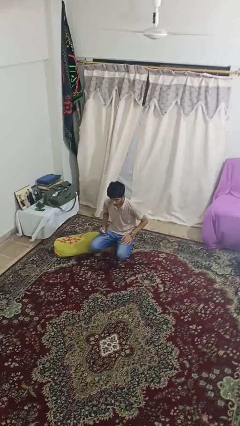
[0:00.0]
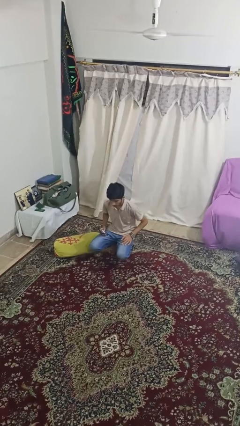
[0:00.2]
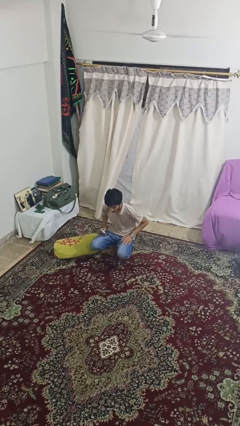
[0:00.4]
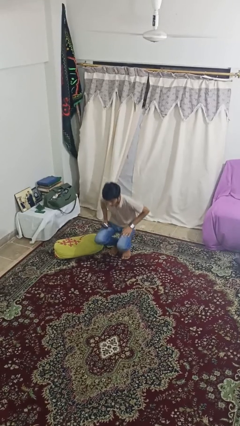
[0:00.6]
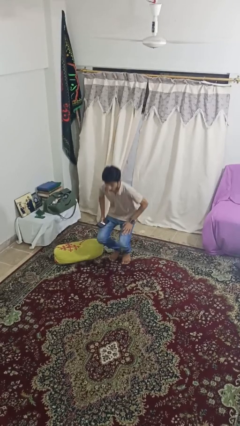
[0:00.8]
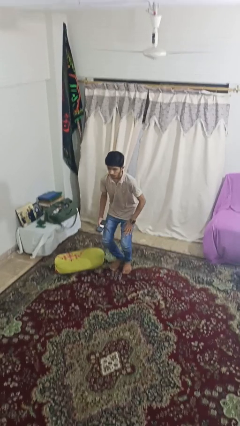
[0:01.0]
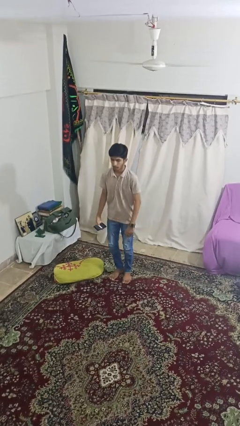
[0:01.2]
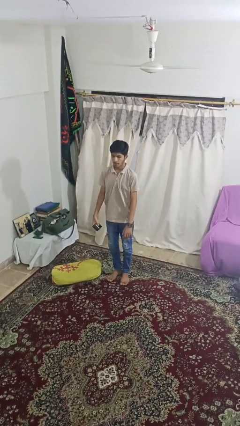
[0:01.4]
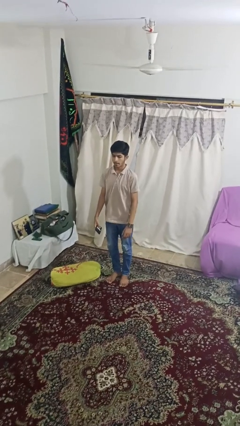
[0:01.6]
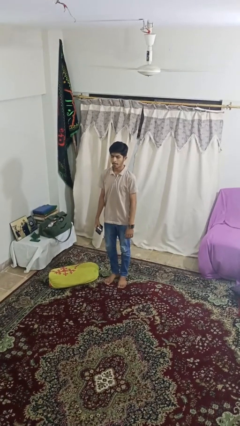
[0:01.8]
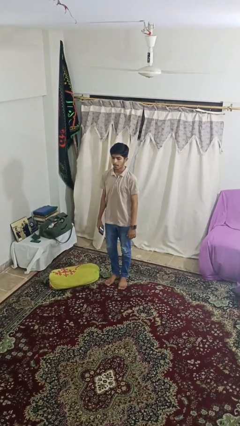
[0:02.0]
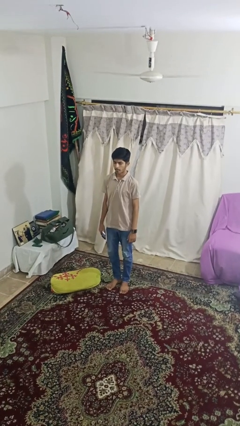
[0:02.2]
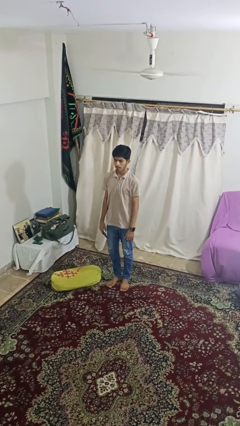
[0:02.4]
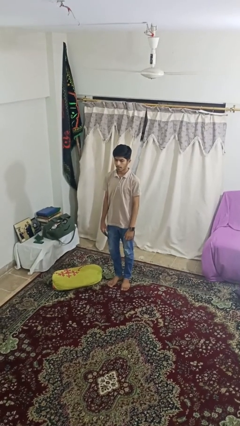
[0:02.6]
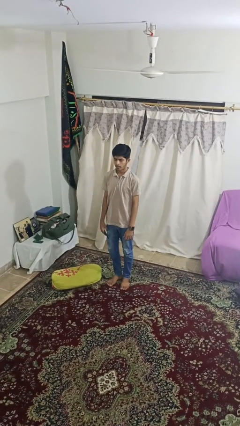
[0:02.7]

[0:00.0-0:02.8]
person stands up

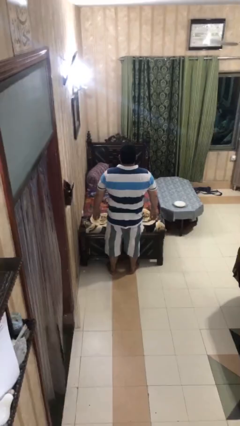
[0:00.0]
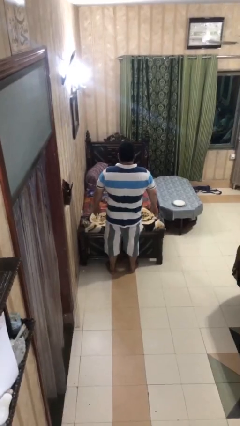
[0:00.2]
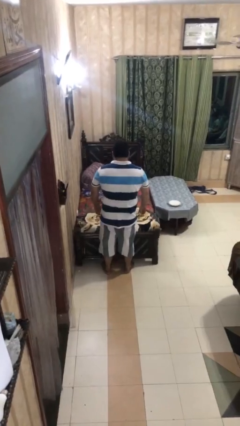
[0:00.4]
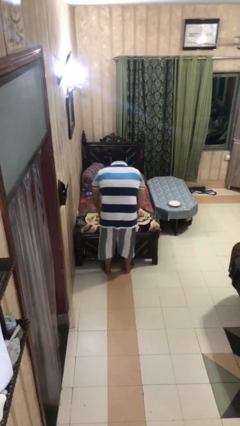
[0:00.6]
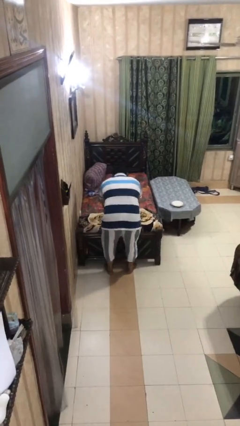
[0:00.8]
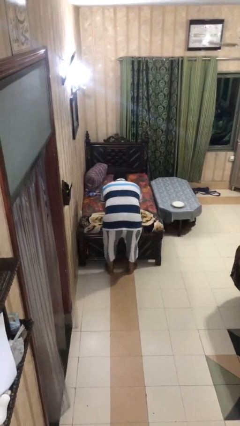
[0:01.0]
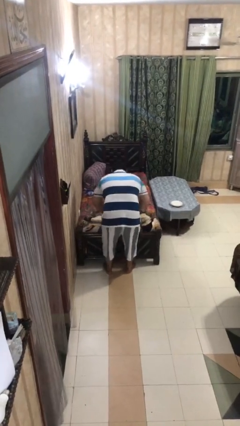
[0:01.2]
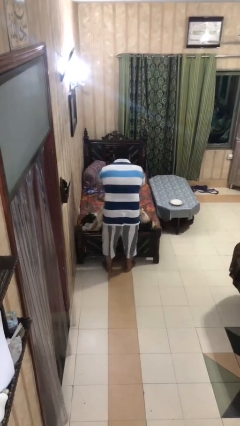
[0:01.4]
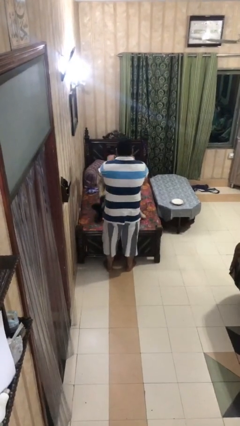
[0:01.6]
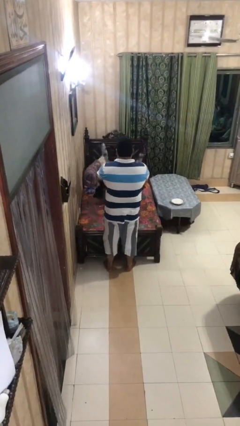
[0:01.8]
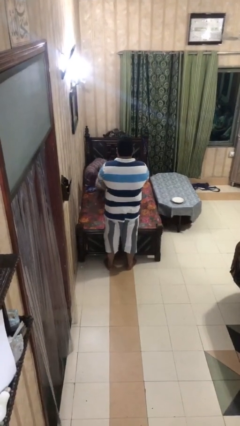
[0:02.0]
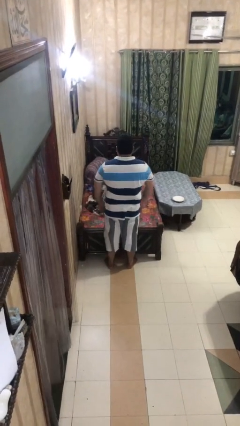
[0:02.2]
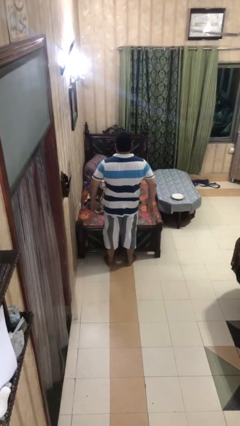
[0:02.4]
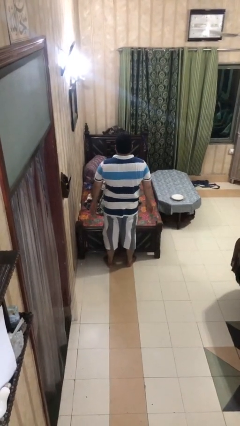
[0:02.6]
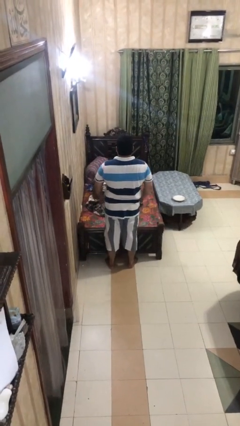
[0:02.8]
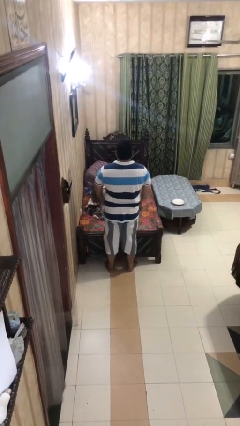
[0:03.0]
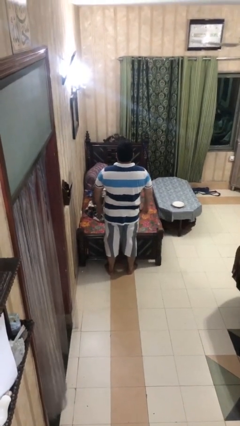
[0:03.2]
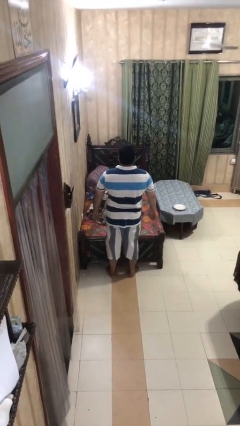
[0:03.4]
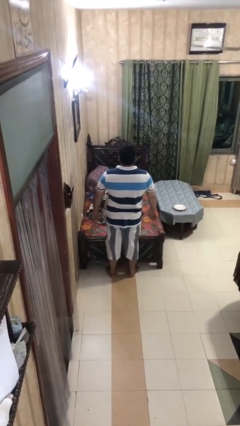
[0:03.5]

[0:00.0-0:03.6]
person unfolds blanket

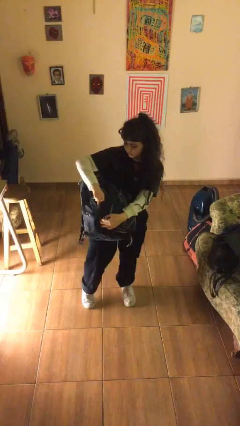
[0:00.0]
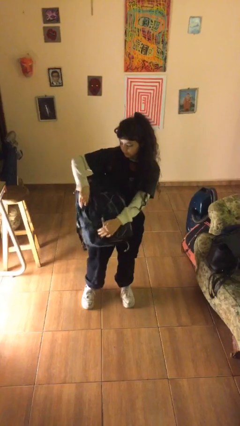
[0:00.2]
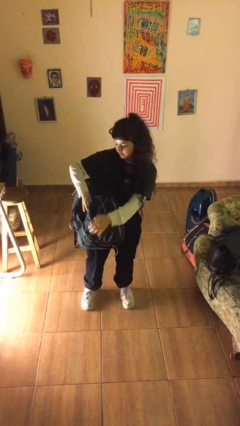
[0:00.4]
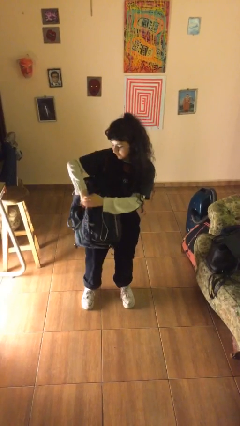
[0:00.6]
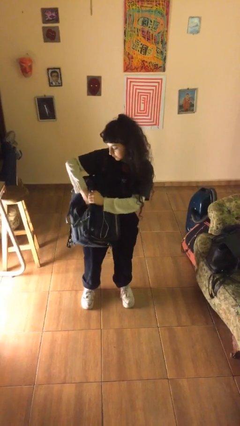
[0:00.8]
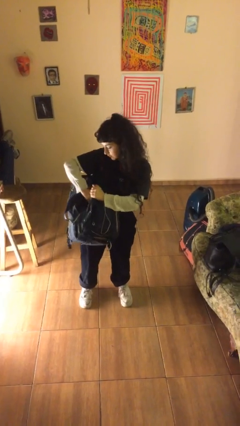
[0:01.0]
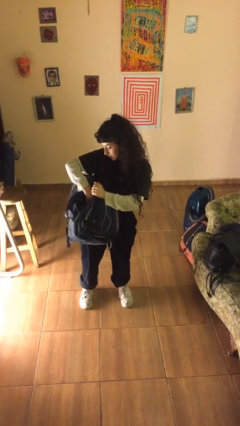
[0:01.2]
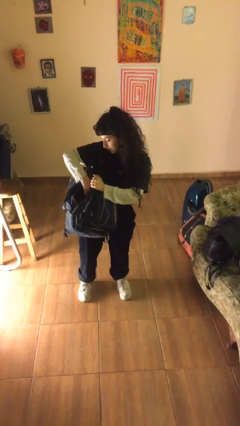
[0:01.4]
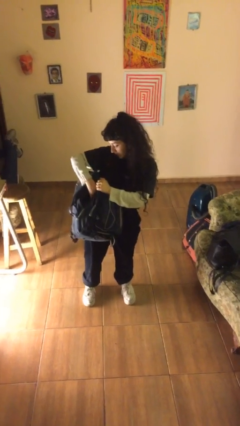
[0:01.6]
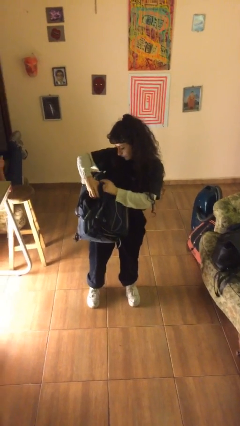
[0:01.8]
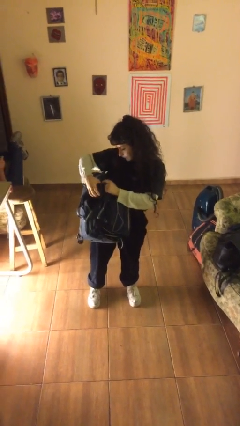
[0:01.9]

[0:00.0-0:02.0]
person searches in backpack

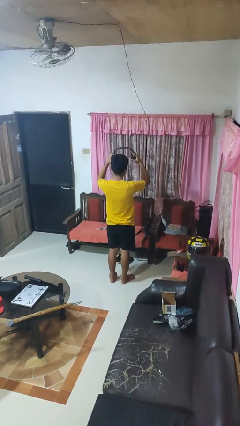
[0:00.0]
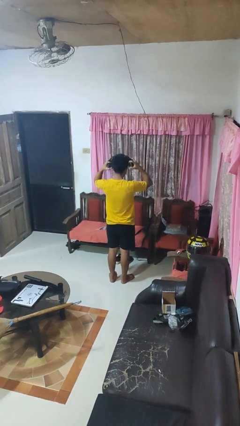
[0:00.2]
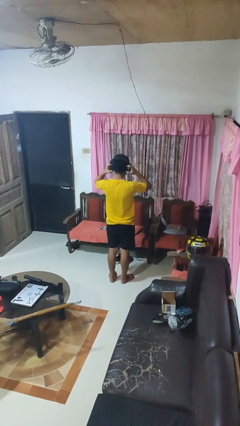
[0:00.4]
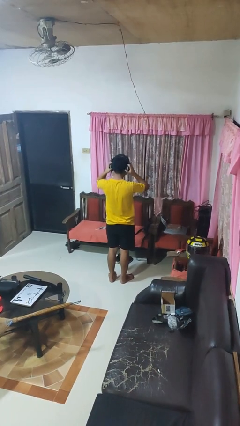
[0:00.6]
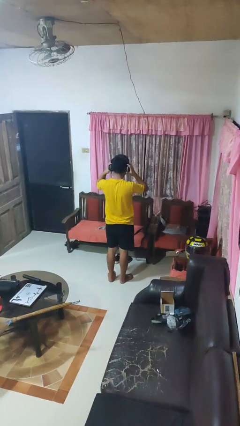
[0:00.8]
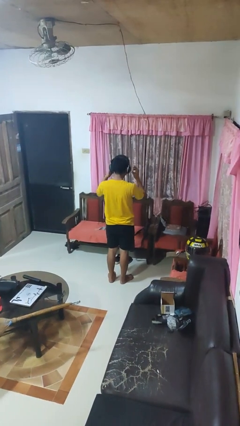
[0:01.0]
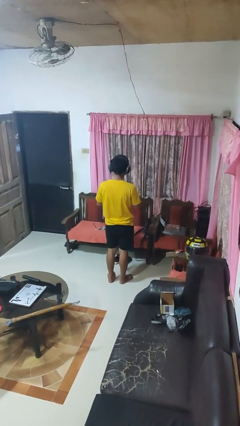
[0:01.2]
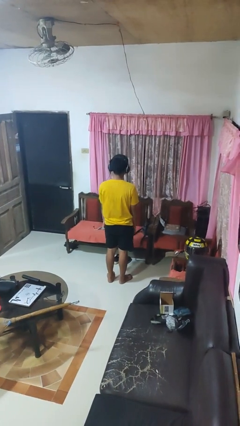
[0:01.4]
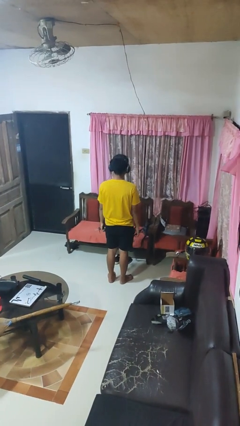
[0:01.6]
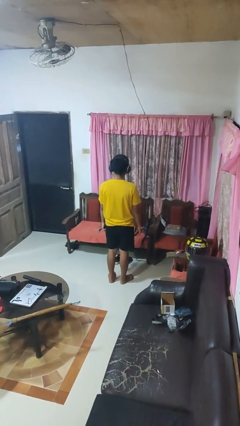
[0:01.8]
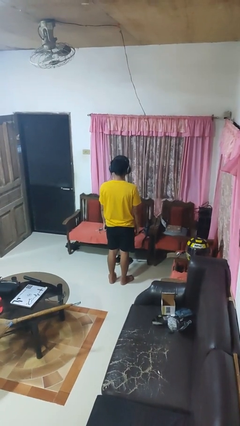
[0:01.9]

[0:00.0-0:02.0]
person puts on headphones

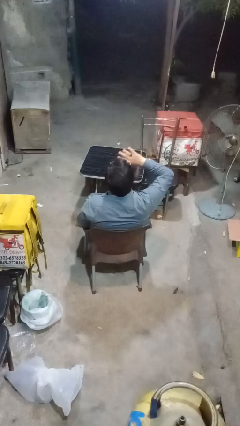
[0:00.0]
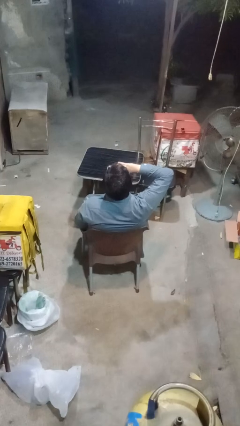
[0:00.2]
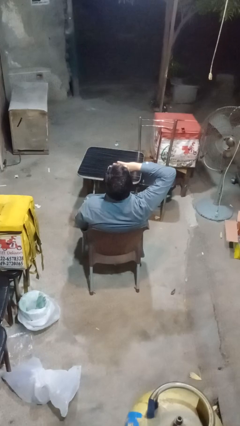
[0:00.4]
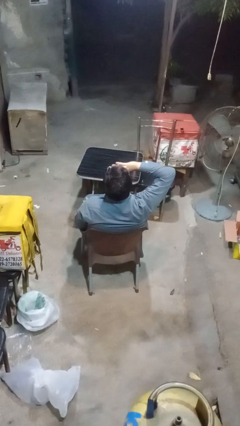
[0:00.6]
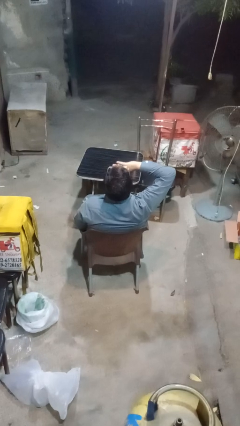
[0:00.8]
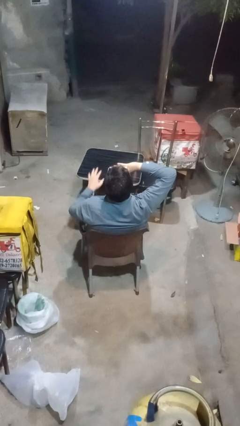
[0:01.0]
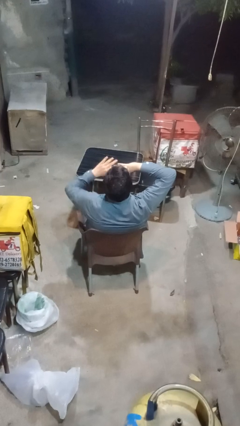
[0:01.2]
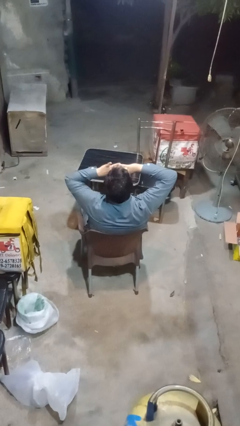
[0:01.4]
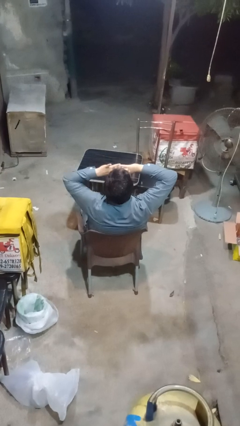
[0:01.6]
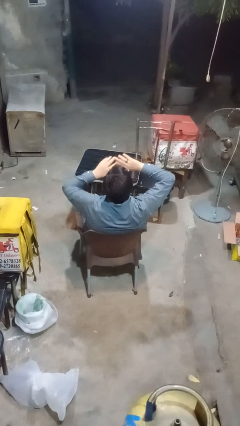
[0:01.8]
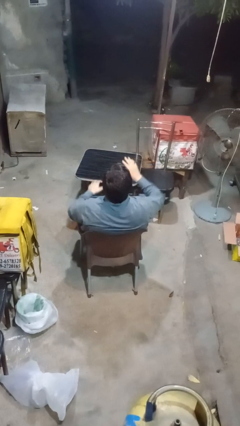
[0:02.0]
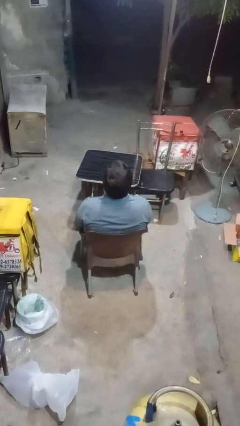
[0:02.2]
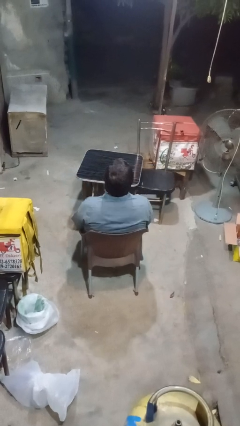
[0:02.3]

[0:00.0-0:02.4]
person yawns

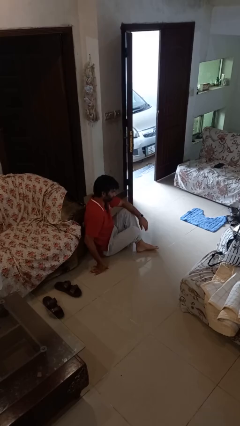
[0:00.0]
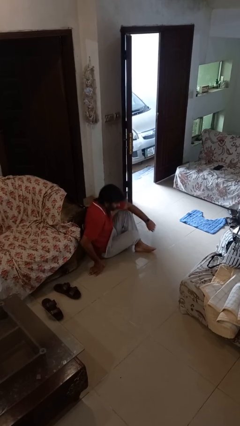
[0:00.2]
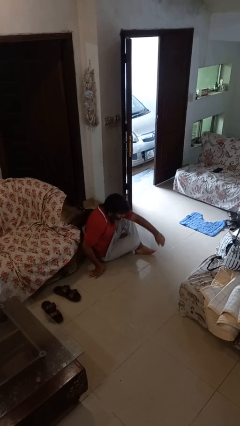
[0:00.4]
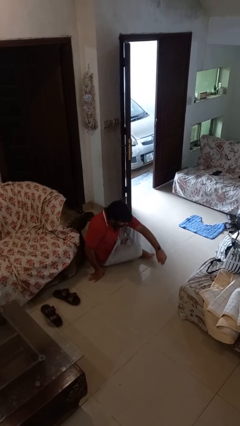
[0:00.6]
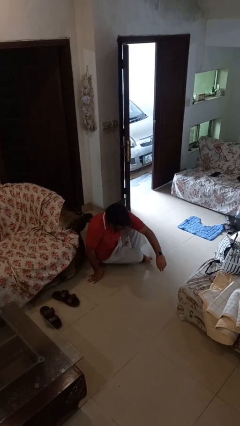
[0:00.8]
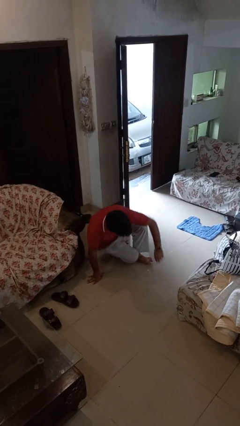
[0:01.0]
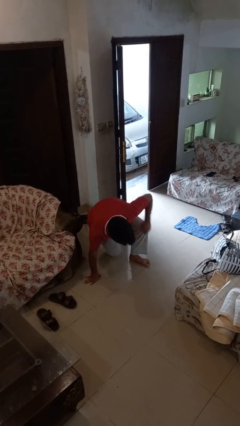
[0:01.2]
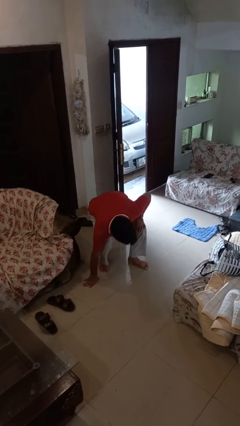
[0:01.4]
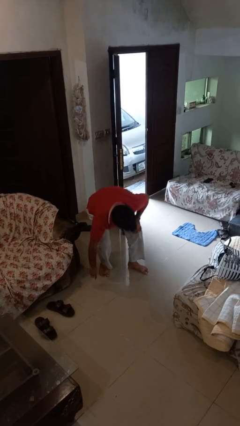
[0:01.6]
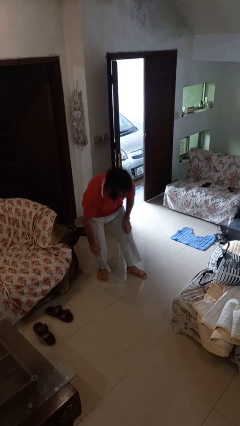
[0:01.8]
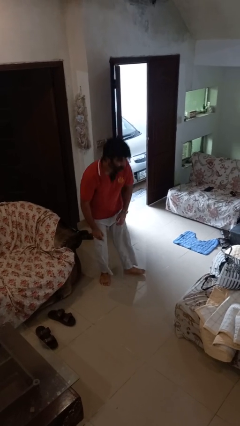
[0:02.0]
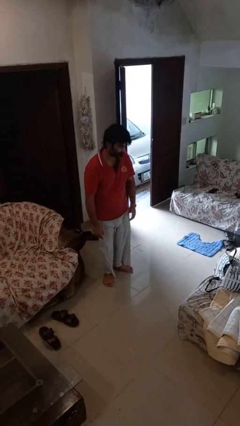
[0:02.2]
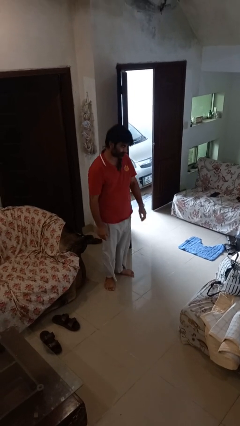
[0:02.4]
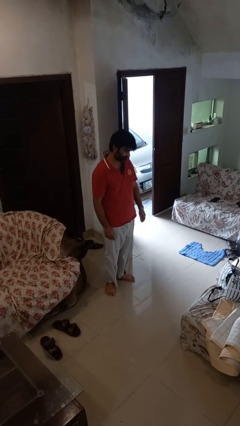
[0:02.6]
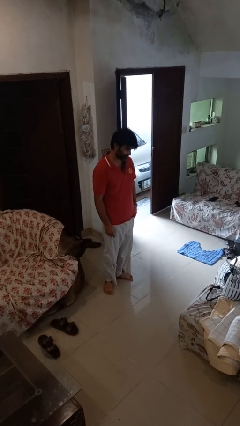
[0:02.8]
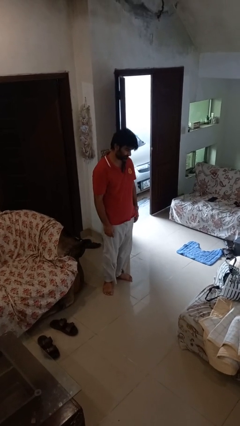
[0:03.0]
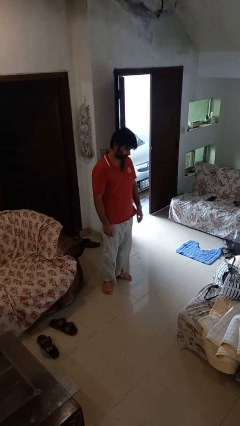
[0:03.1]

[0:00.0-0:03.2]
person stands up from floor

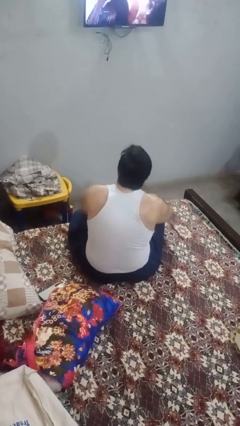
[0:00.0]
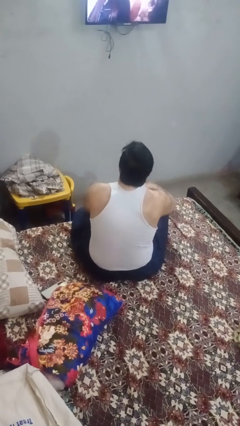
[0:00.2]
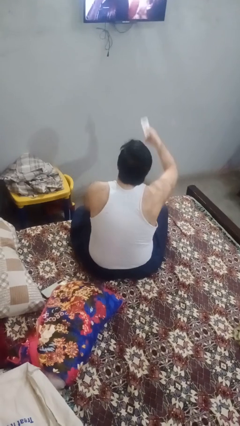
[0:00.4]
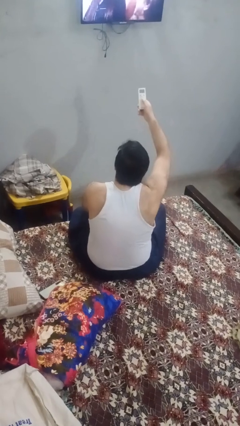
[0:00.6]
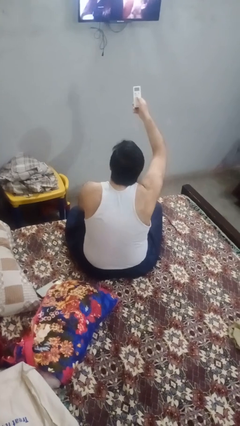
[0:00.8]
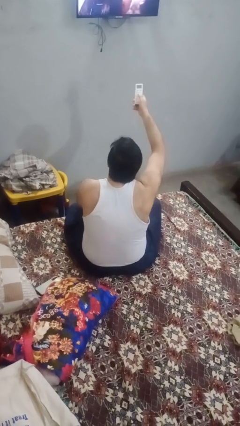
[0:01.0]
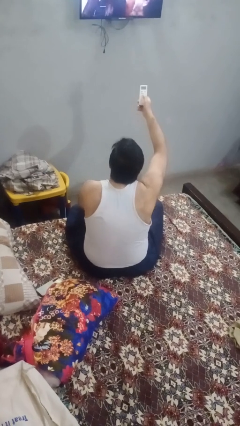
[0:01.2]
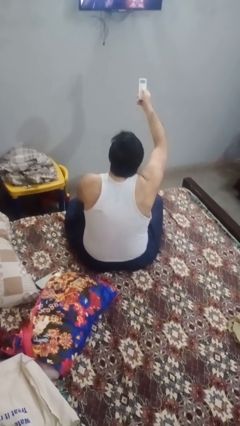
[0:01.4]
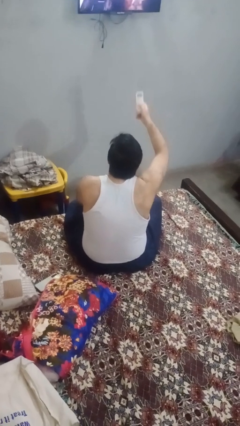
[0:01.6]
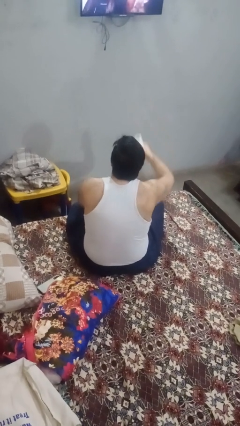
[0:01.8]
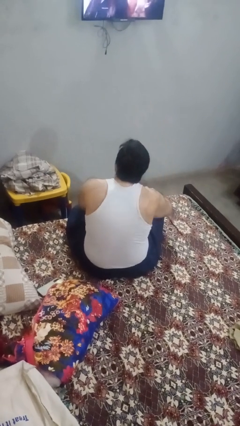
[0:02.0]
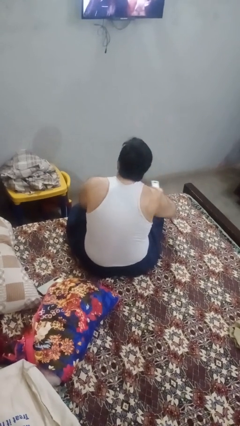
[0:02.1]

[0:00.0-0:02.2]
person uses television remote
